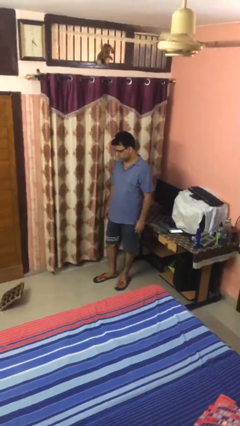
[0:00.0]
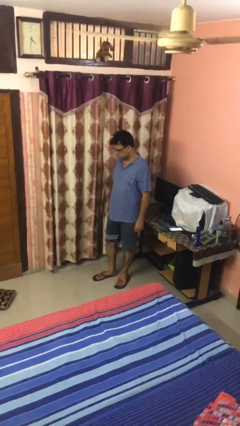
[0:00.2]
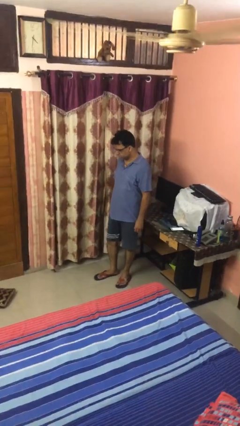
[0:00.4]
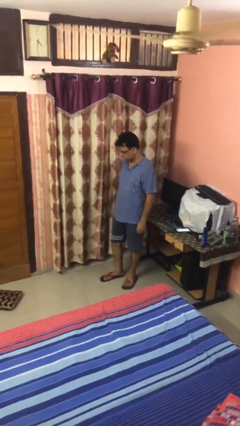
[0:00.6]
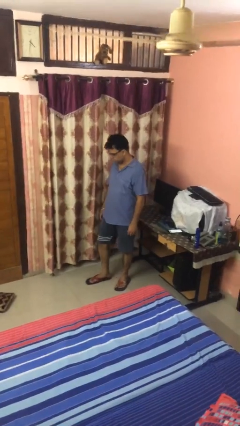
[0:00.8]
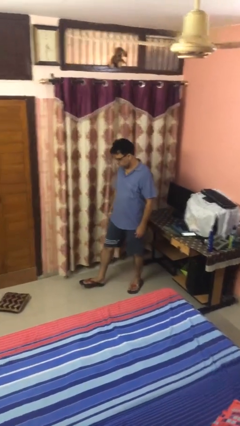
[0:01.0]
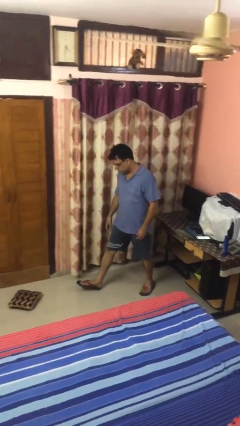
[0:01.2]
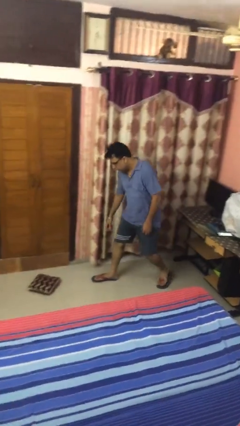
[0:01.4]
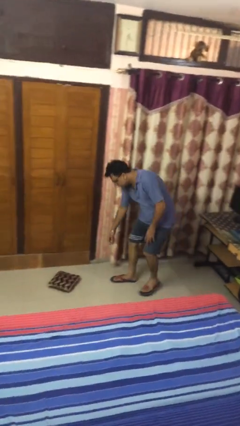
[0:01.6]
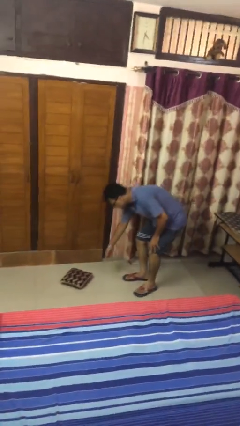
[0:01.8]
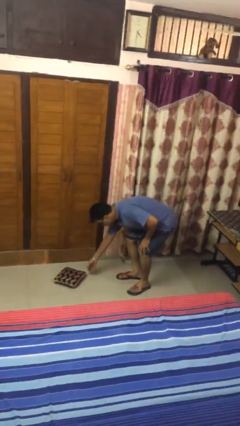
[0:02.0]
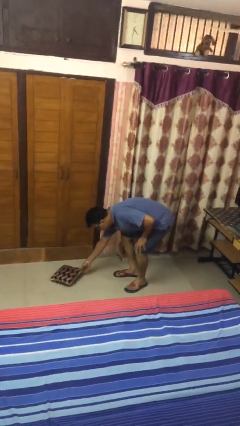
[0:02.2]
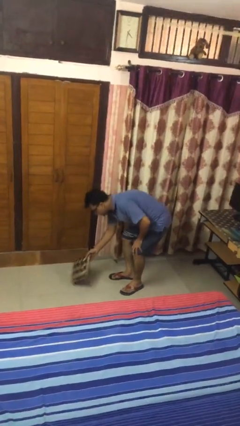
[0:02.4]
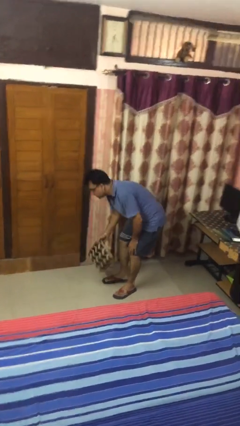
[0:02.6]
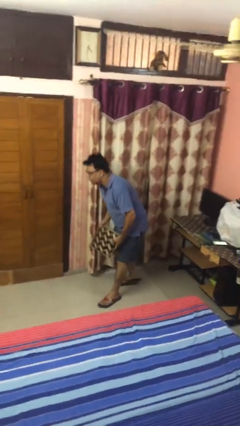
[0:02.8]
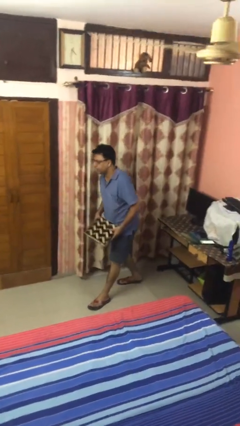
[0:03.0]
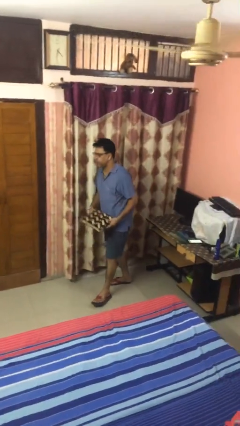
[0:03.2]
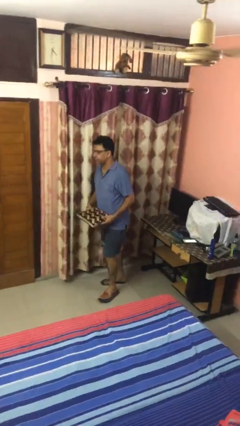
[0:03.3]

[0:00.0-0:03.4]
person picks up object from floor

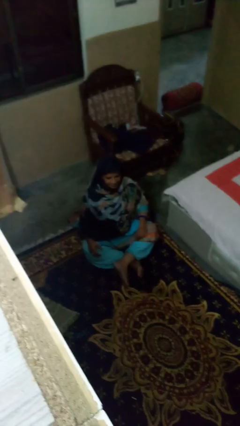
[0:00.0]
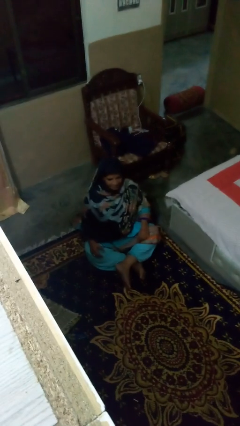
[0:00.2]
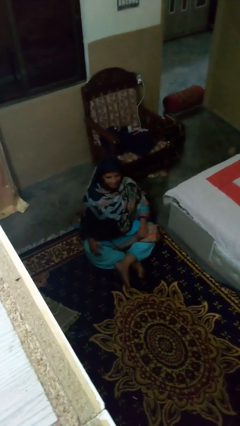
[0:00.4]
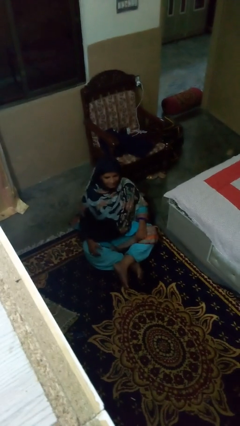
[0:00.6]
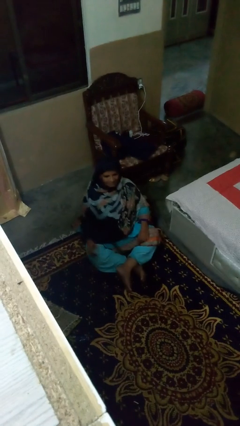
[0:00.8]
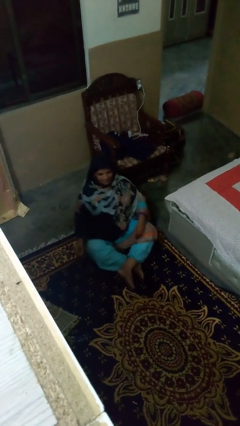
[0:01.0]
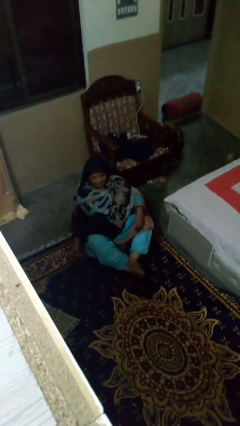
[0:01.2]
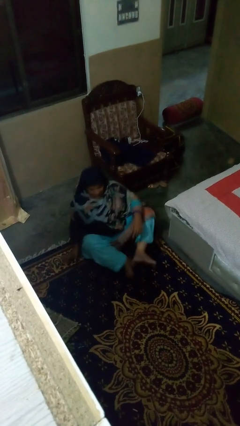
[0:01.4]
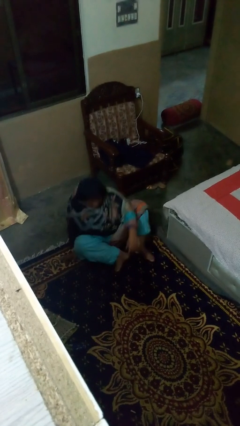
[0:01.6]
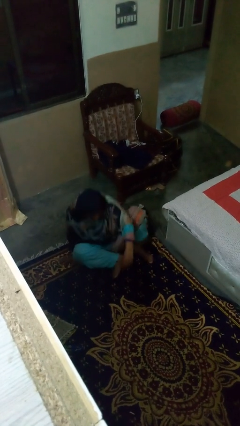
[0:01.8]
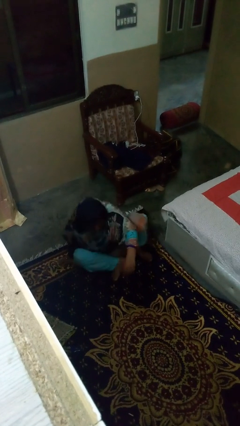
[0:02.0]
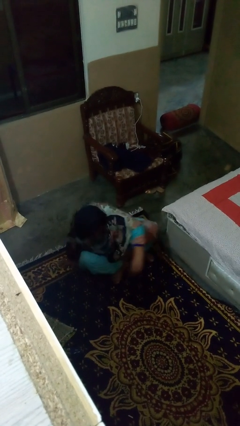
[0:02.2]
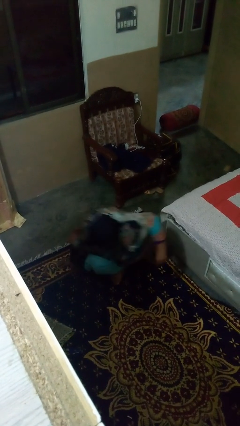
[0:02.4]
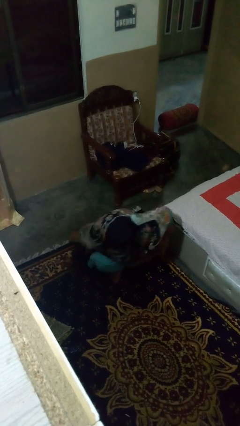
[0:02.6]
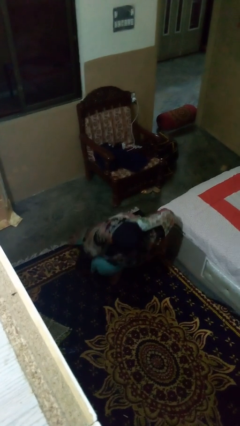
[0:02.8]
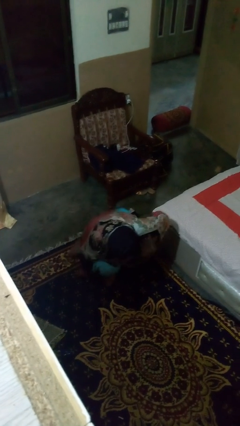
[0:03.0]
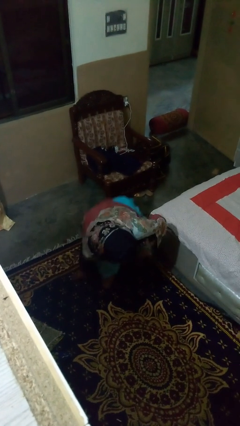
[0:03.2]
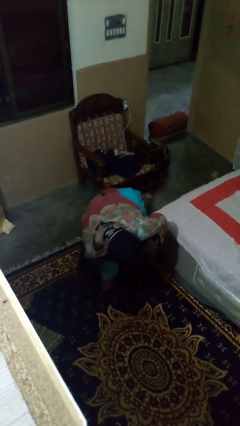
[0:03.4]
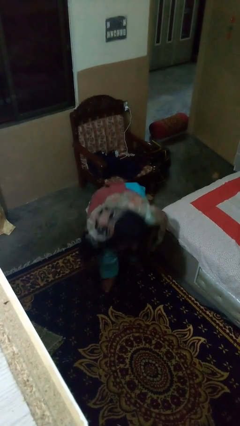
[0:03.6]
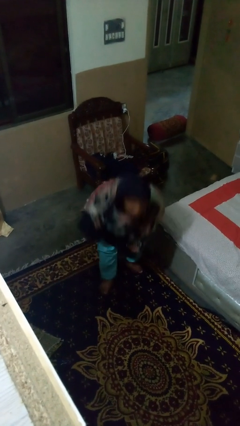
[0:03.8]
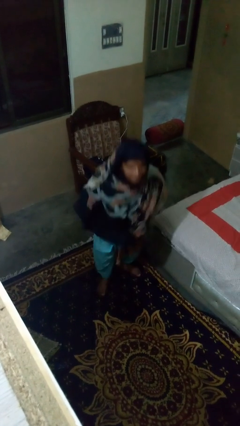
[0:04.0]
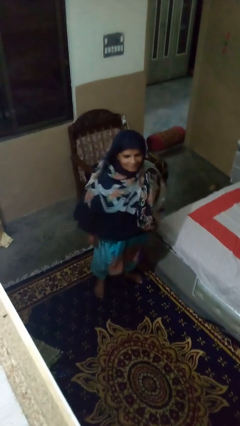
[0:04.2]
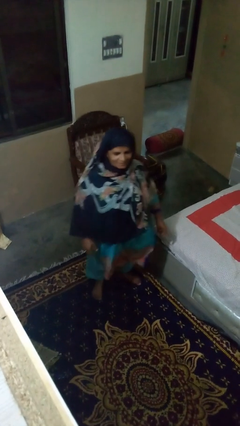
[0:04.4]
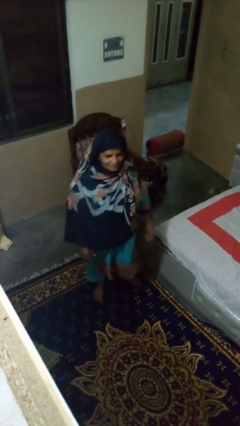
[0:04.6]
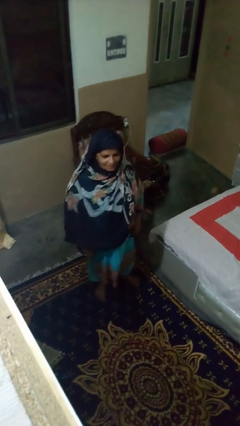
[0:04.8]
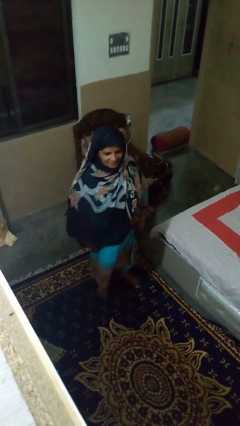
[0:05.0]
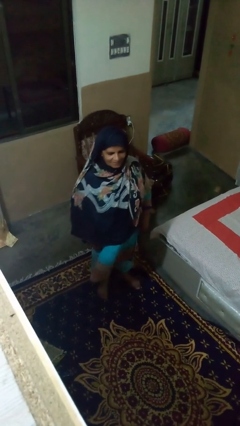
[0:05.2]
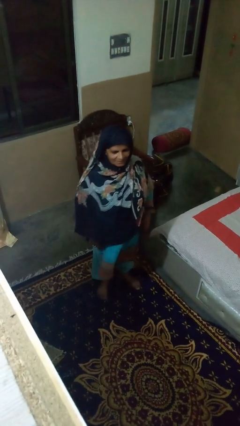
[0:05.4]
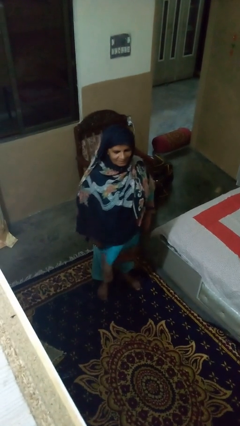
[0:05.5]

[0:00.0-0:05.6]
person stands up from floor

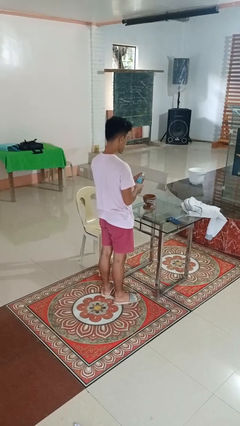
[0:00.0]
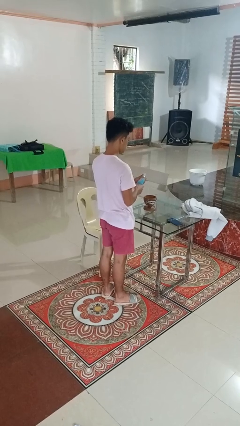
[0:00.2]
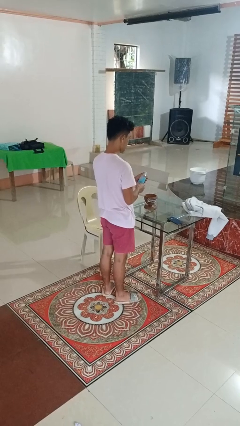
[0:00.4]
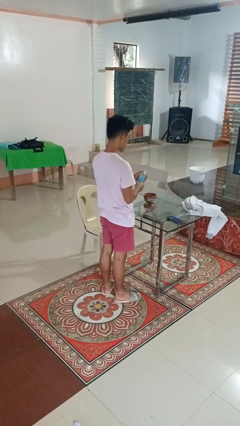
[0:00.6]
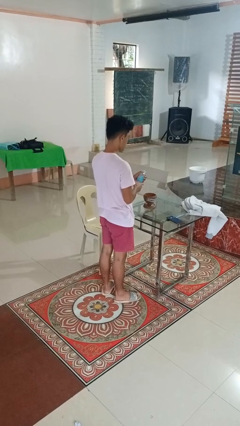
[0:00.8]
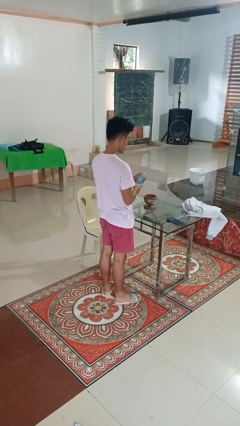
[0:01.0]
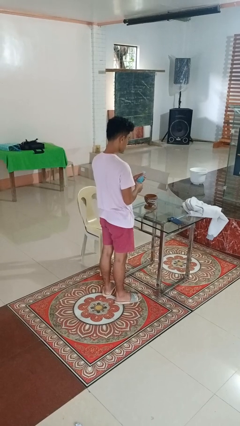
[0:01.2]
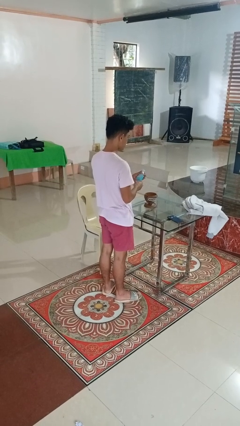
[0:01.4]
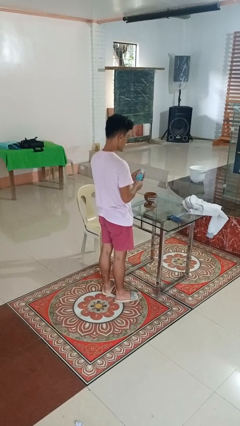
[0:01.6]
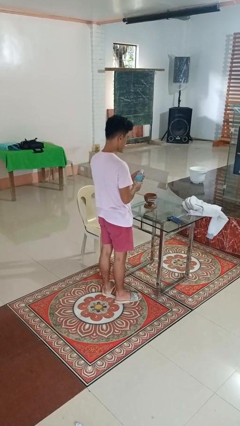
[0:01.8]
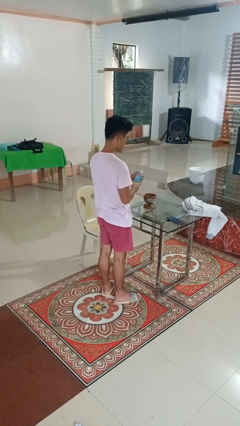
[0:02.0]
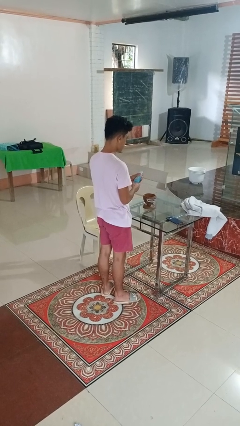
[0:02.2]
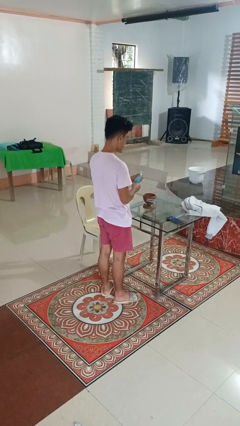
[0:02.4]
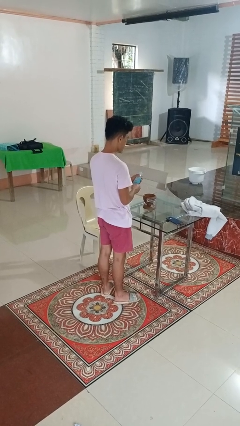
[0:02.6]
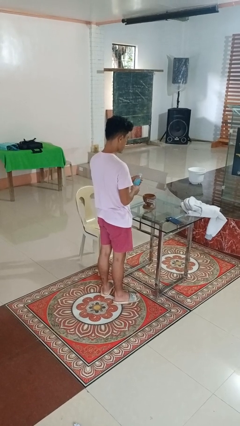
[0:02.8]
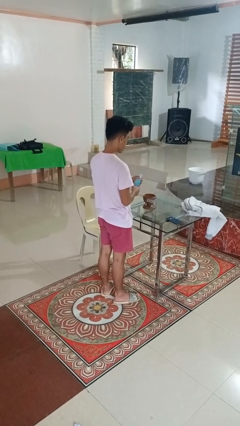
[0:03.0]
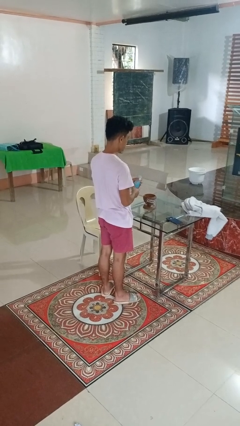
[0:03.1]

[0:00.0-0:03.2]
person squeezes object

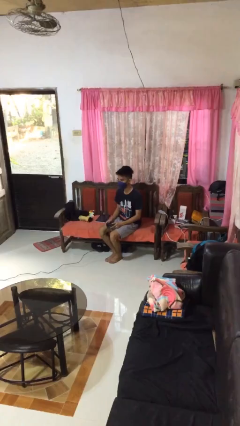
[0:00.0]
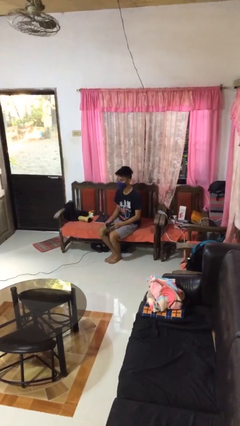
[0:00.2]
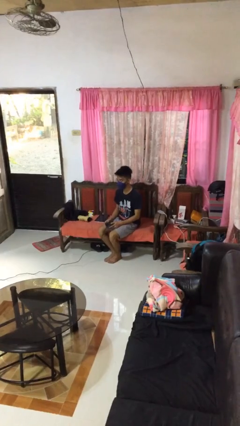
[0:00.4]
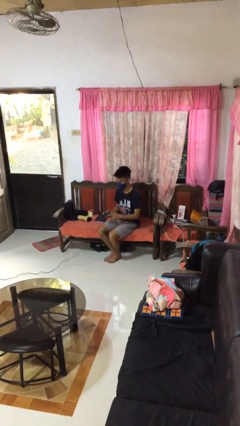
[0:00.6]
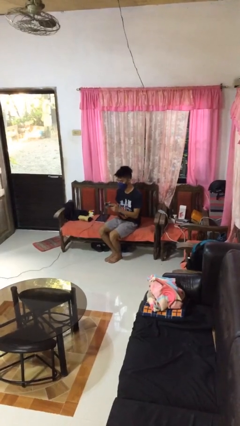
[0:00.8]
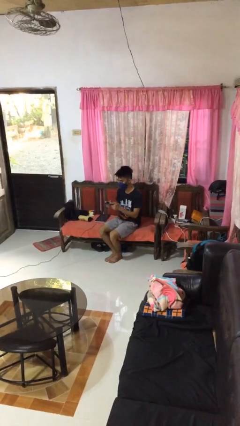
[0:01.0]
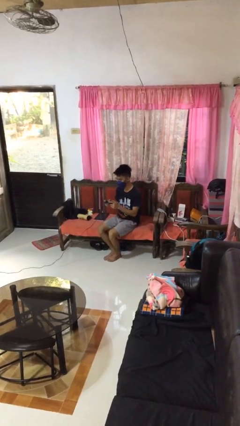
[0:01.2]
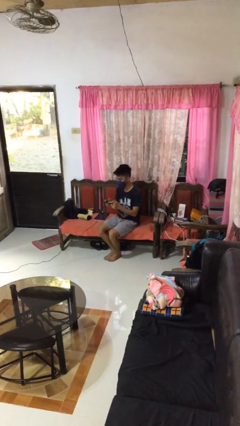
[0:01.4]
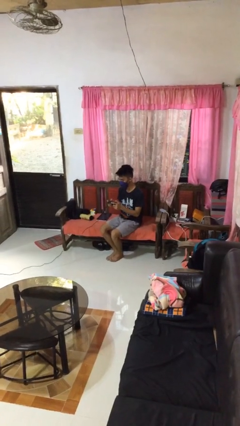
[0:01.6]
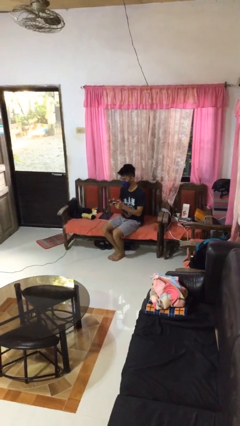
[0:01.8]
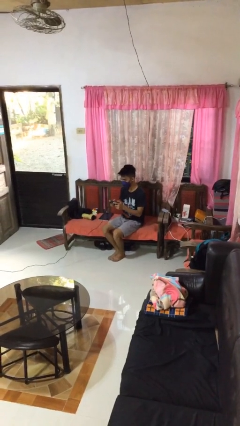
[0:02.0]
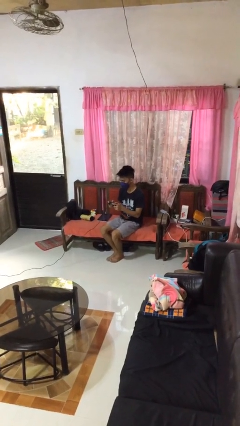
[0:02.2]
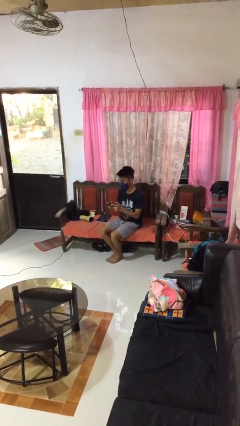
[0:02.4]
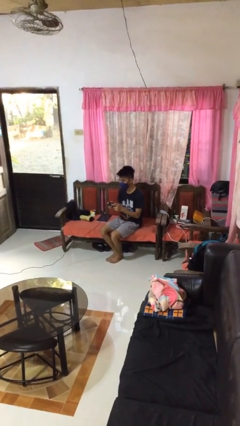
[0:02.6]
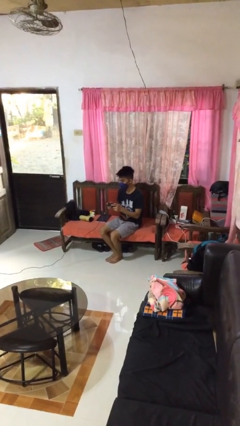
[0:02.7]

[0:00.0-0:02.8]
person interacts with handheld game

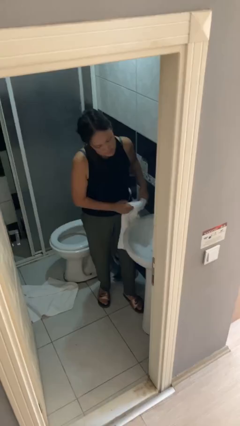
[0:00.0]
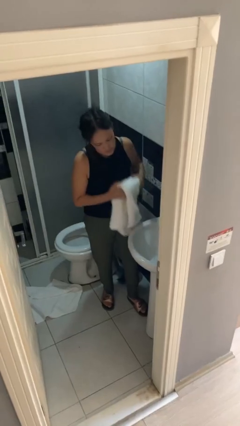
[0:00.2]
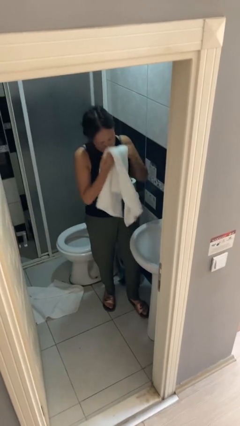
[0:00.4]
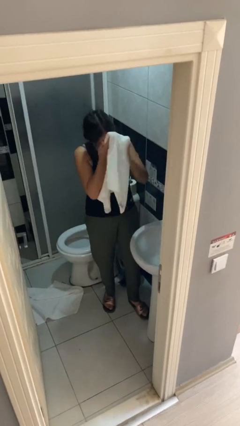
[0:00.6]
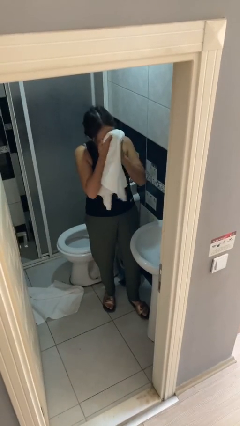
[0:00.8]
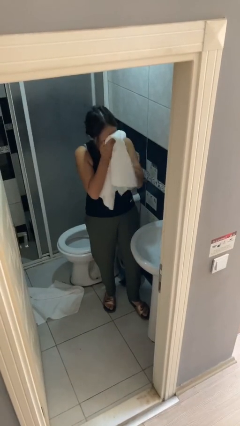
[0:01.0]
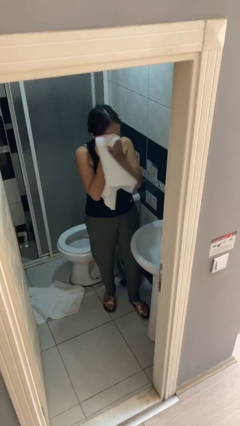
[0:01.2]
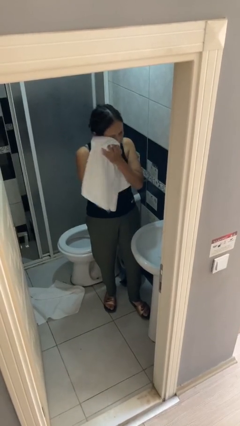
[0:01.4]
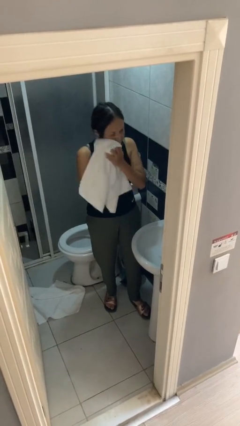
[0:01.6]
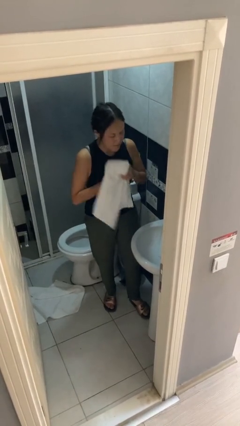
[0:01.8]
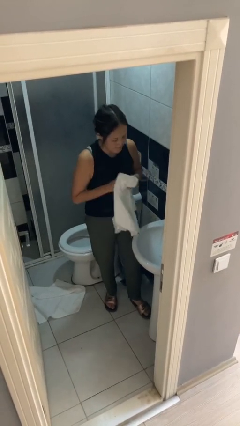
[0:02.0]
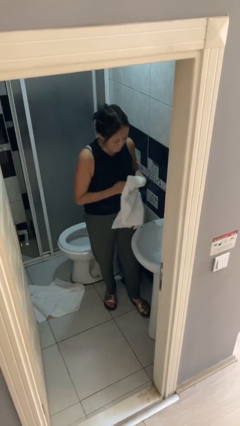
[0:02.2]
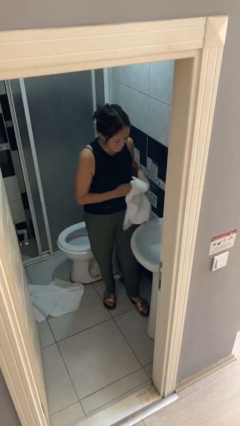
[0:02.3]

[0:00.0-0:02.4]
person dries face with towel

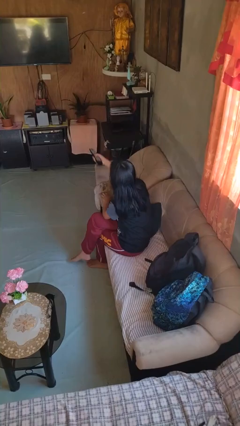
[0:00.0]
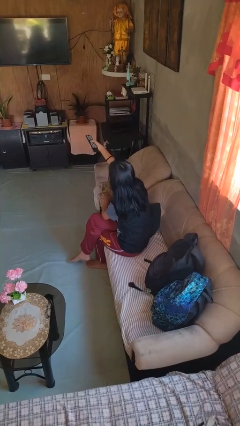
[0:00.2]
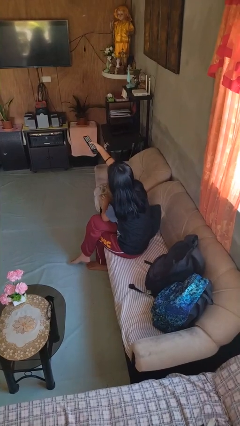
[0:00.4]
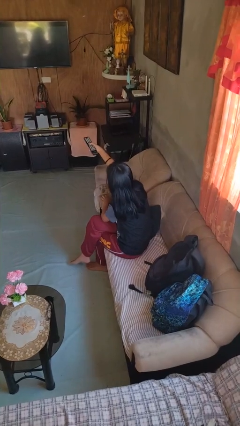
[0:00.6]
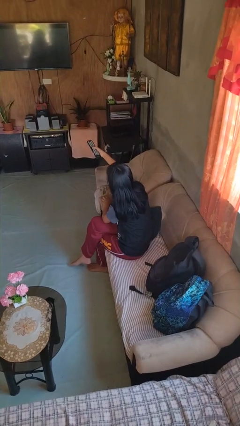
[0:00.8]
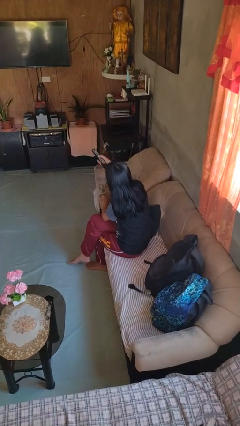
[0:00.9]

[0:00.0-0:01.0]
person uses television remote
